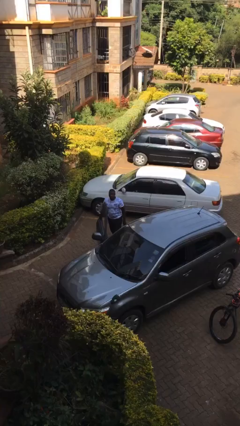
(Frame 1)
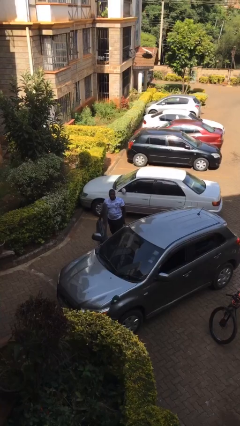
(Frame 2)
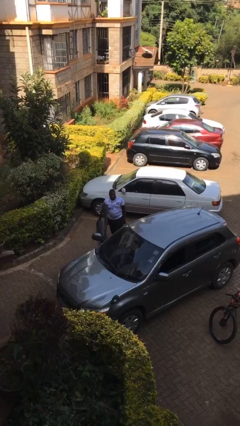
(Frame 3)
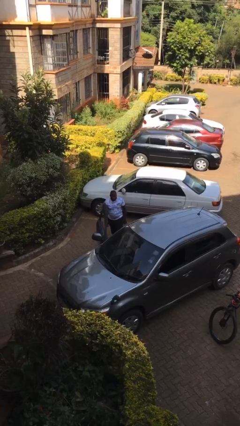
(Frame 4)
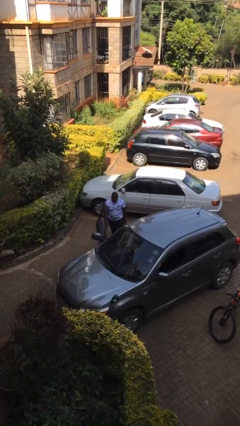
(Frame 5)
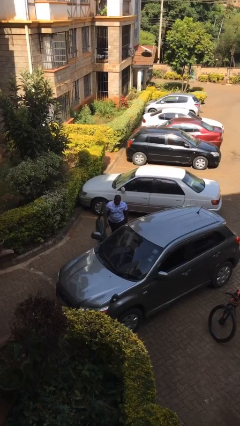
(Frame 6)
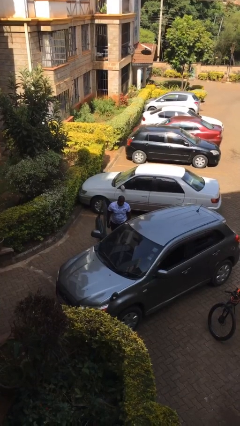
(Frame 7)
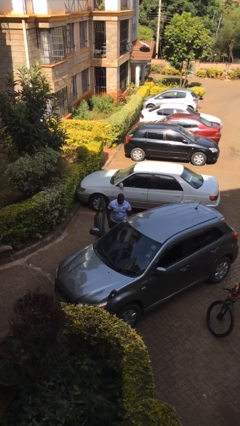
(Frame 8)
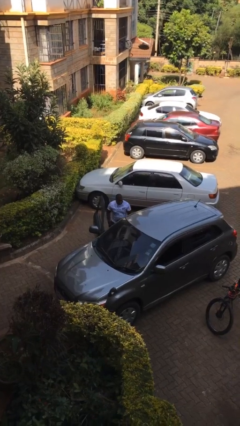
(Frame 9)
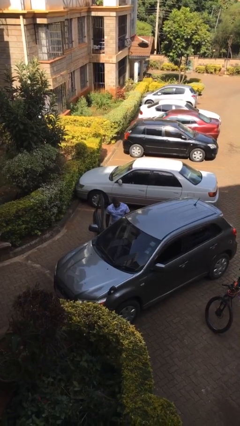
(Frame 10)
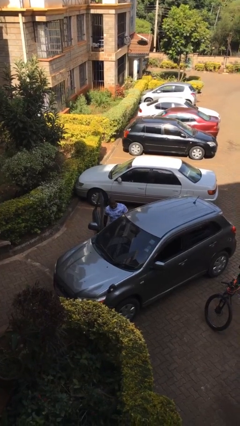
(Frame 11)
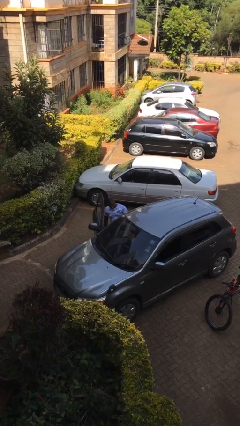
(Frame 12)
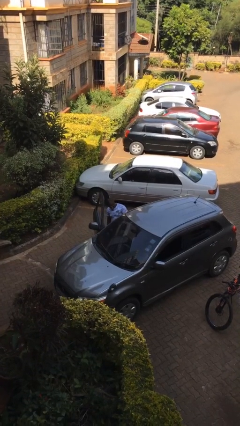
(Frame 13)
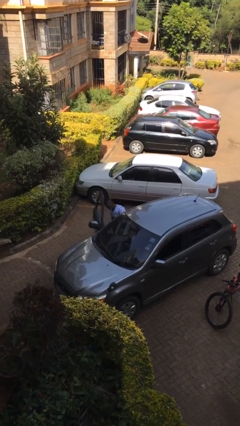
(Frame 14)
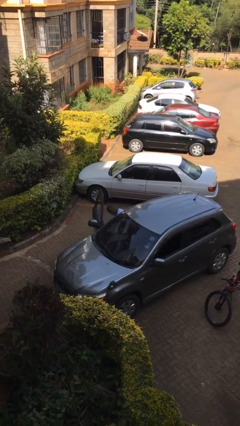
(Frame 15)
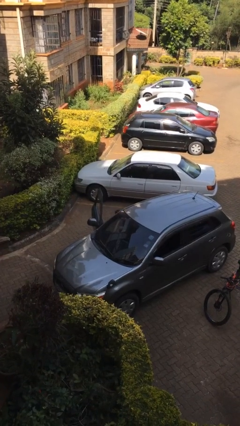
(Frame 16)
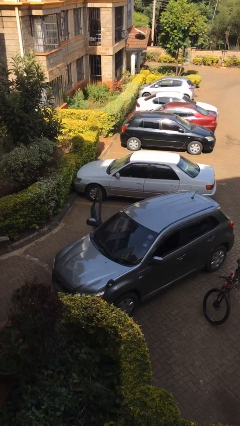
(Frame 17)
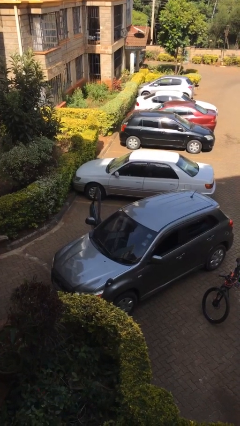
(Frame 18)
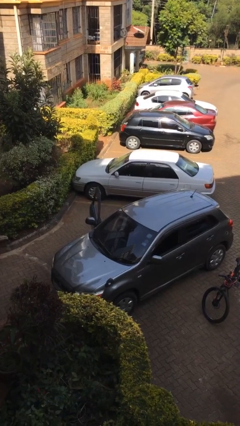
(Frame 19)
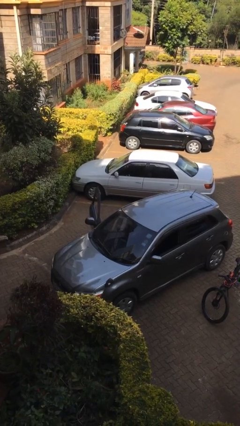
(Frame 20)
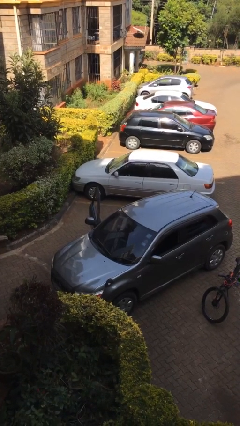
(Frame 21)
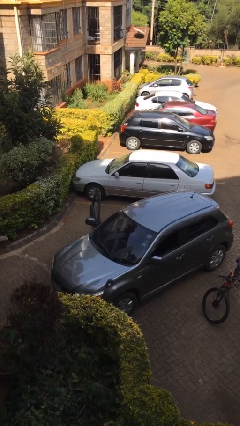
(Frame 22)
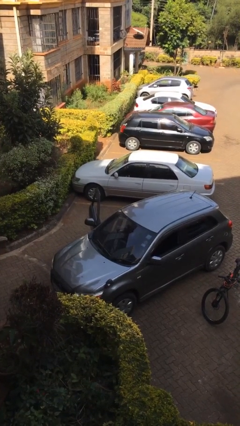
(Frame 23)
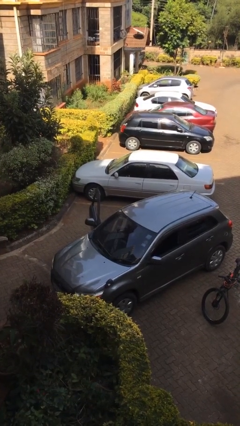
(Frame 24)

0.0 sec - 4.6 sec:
person enters car

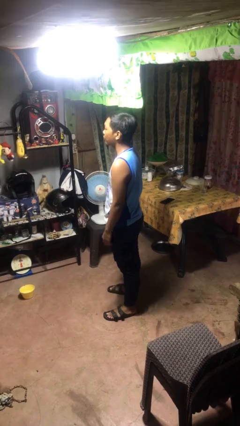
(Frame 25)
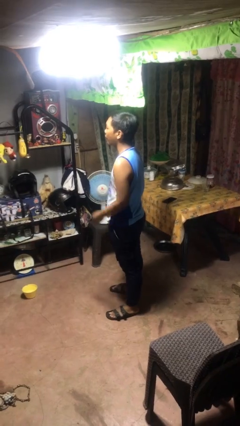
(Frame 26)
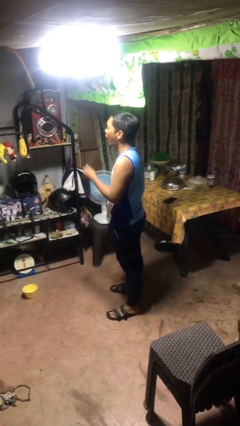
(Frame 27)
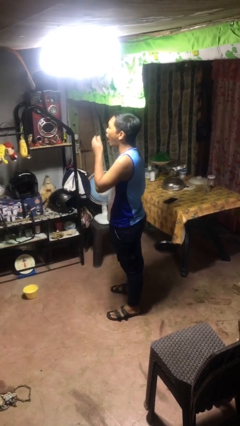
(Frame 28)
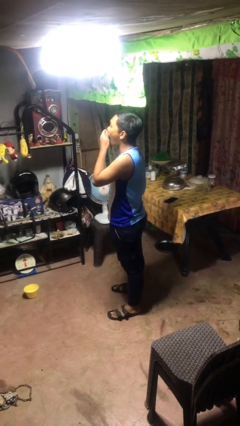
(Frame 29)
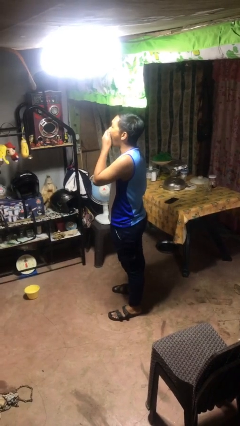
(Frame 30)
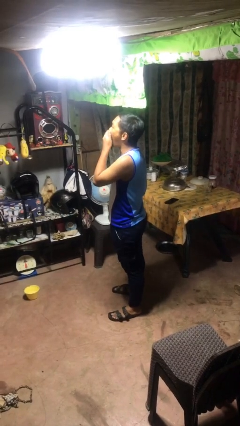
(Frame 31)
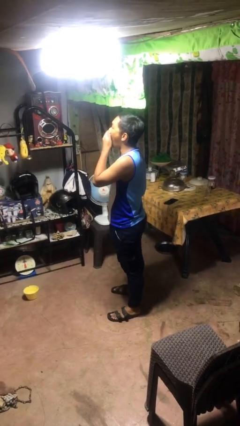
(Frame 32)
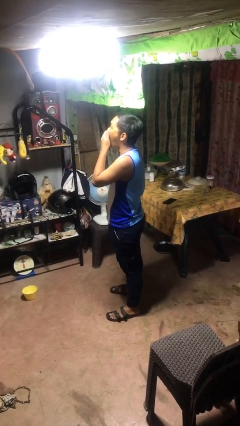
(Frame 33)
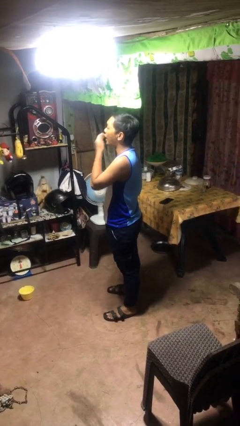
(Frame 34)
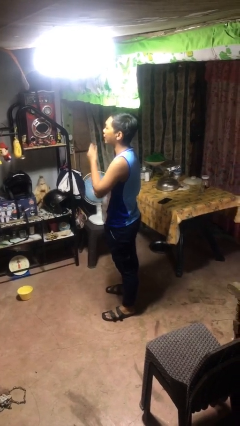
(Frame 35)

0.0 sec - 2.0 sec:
person yawns

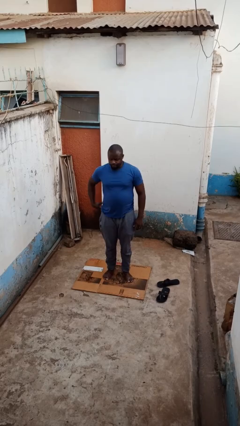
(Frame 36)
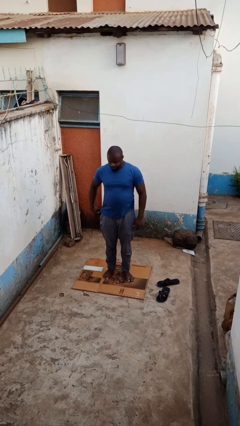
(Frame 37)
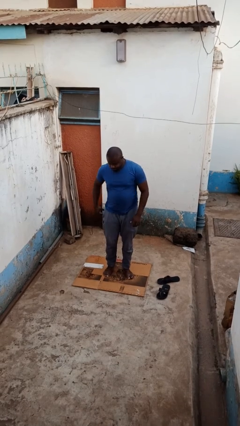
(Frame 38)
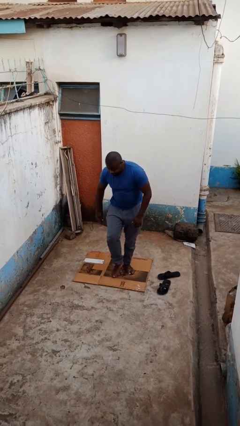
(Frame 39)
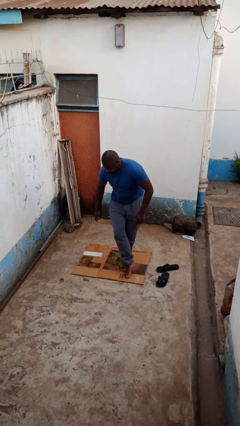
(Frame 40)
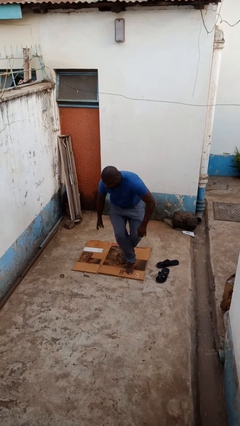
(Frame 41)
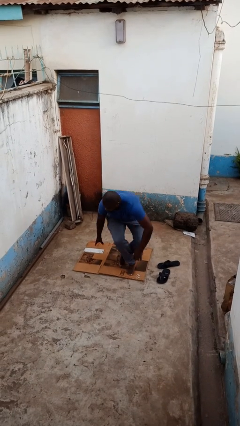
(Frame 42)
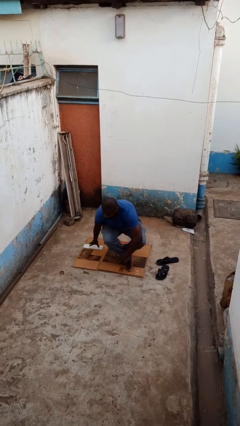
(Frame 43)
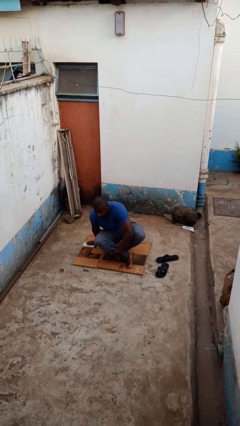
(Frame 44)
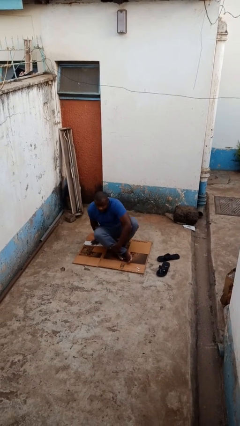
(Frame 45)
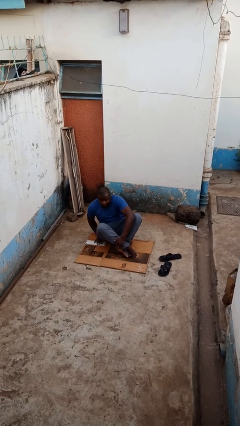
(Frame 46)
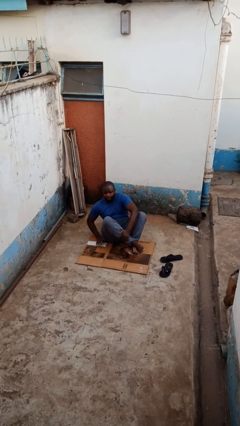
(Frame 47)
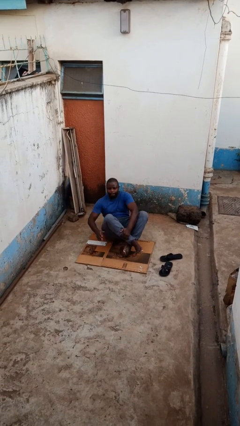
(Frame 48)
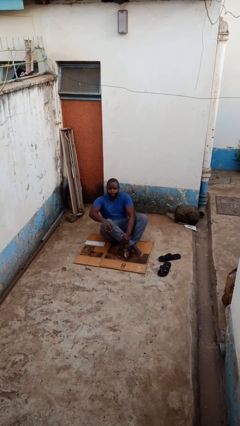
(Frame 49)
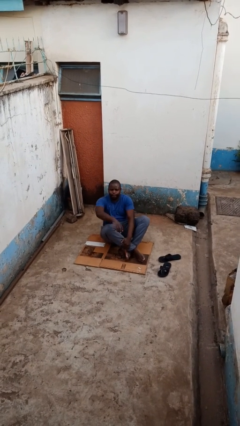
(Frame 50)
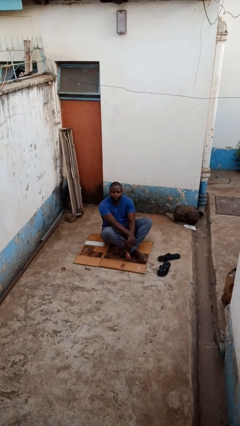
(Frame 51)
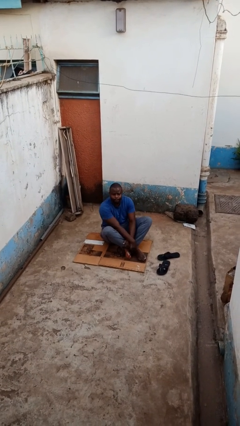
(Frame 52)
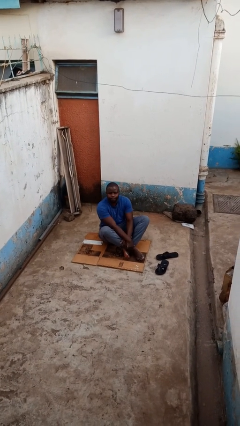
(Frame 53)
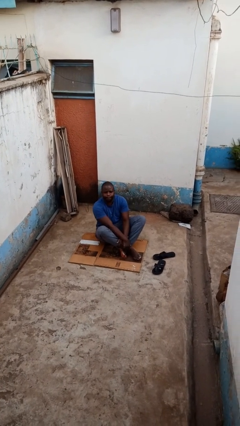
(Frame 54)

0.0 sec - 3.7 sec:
person sits crisscross

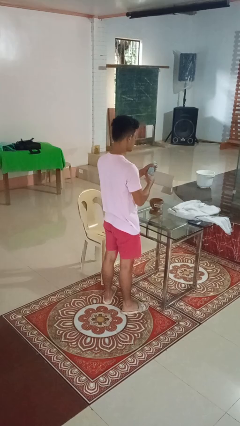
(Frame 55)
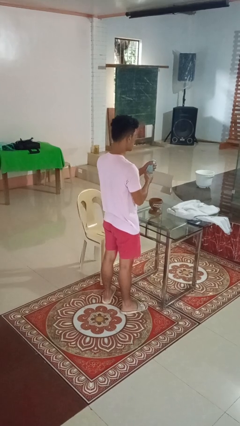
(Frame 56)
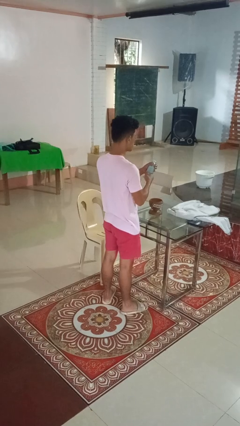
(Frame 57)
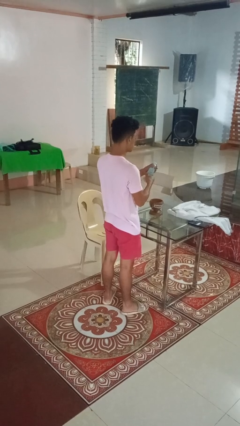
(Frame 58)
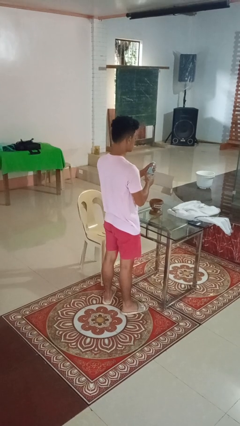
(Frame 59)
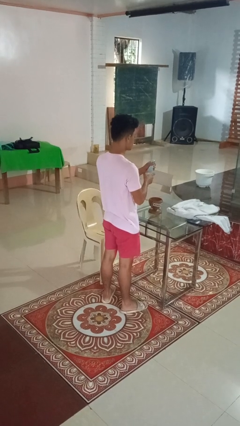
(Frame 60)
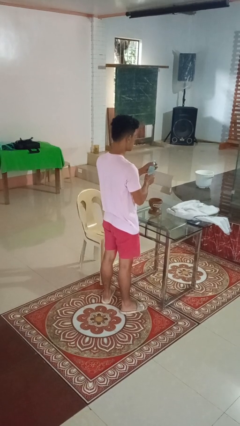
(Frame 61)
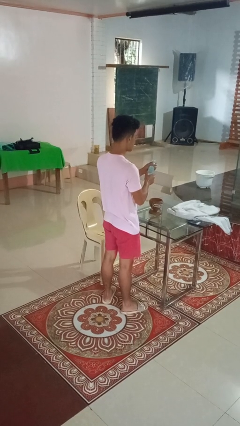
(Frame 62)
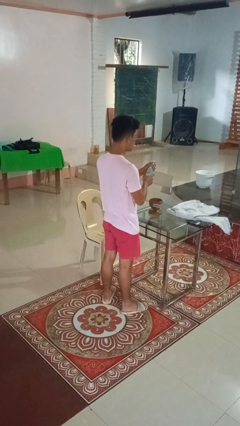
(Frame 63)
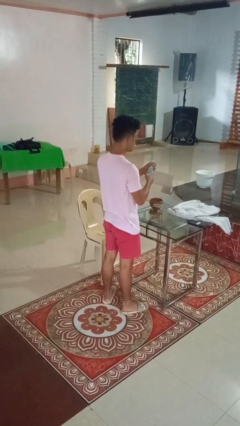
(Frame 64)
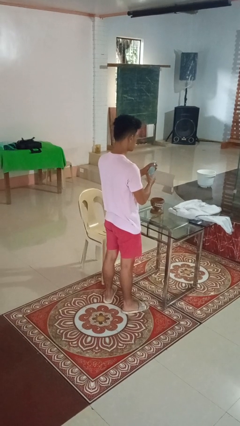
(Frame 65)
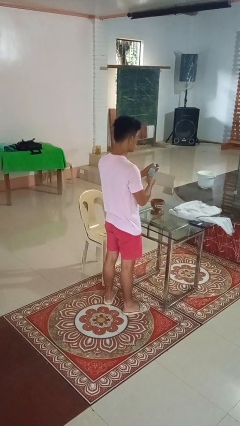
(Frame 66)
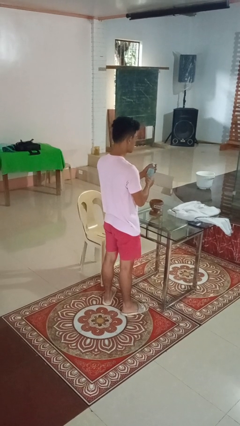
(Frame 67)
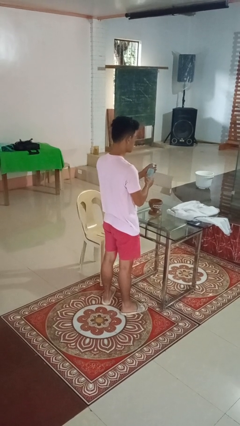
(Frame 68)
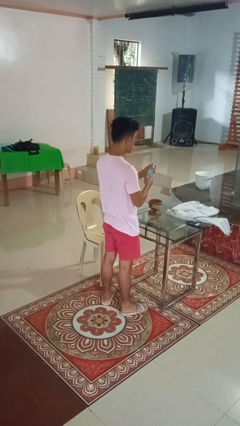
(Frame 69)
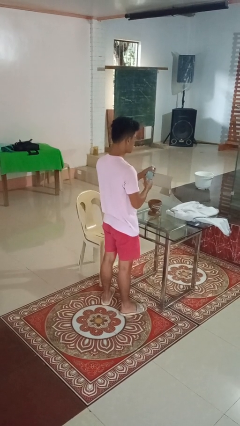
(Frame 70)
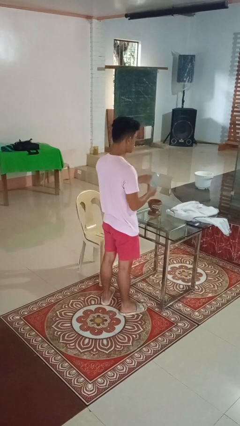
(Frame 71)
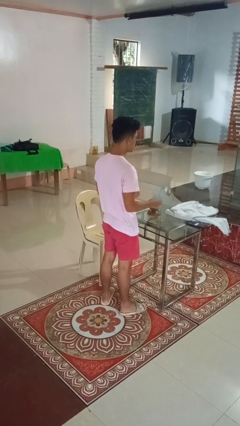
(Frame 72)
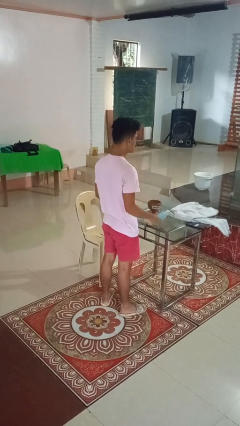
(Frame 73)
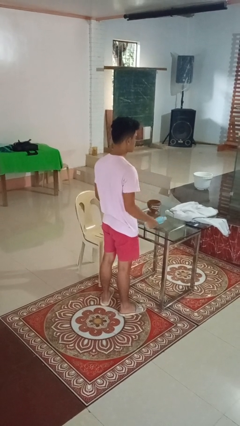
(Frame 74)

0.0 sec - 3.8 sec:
person squeezes object

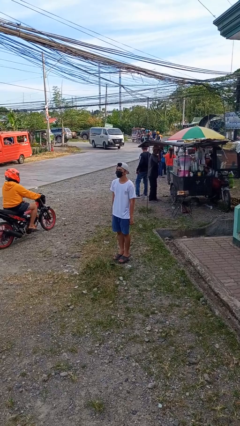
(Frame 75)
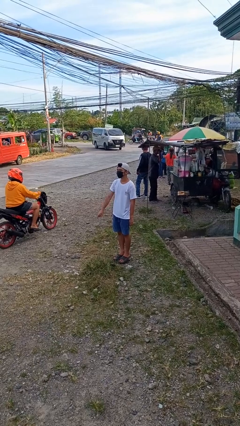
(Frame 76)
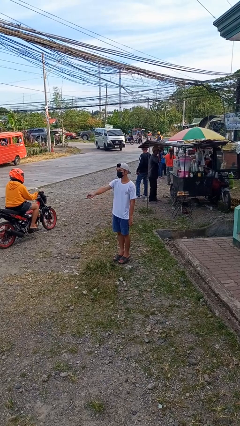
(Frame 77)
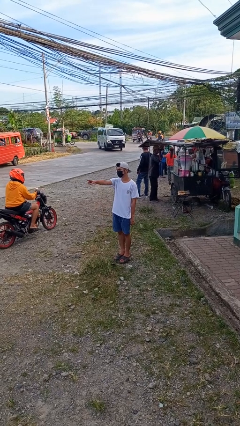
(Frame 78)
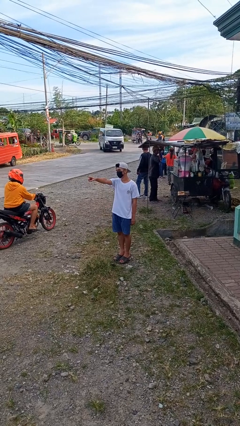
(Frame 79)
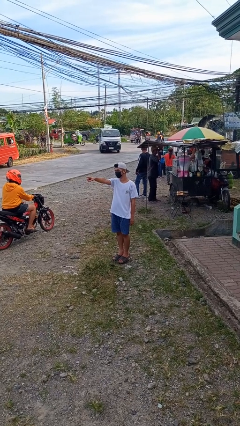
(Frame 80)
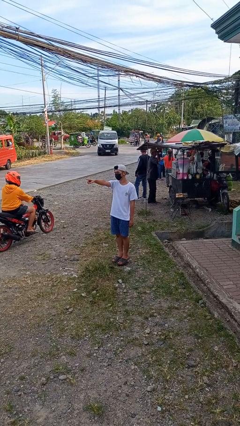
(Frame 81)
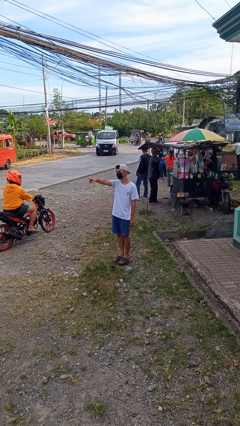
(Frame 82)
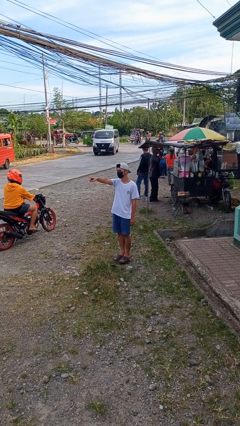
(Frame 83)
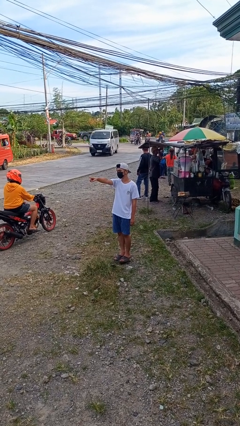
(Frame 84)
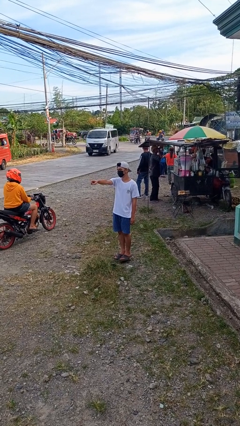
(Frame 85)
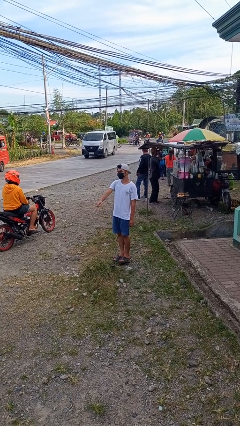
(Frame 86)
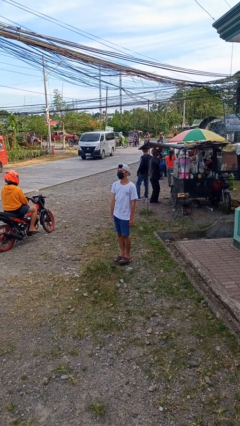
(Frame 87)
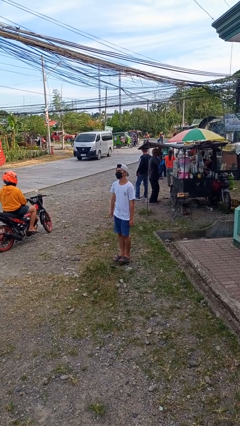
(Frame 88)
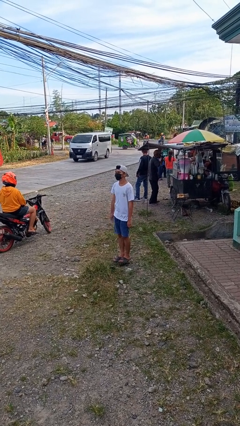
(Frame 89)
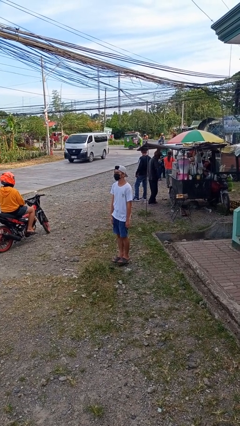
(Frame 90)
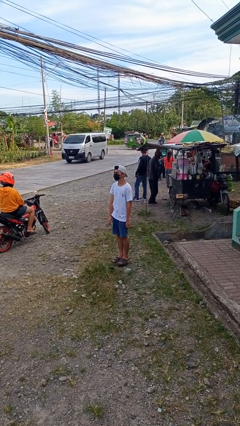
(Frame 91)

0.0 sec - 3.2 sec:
person points at person

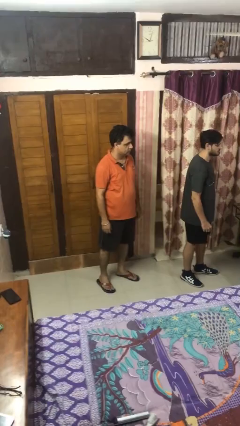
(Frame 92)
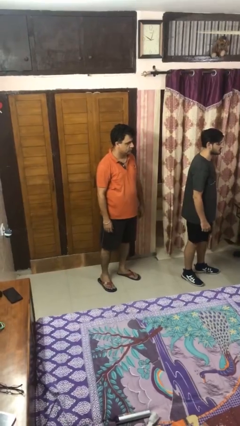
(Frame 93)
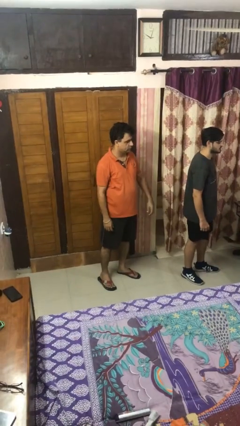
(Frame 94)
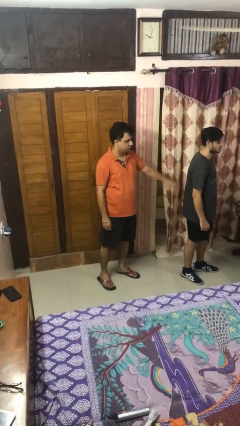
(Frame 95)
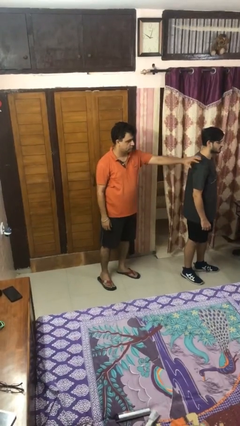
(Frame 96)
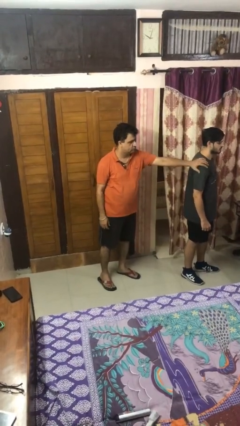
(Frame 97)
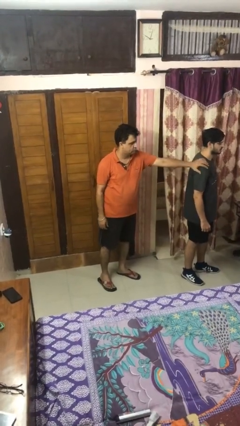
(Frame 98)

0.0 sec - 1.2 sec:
person grabs person by shoulder
